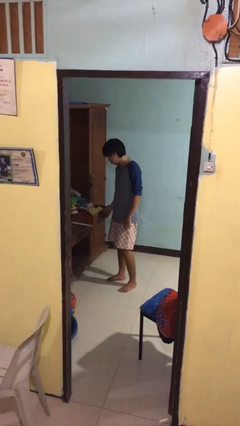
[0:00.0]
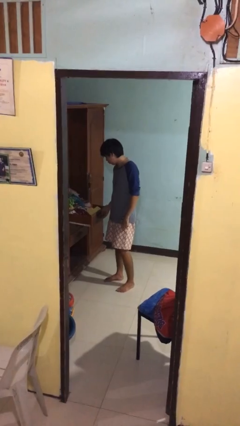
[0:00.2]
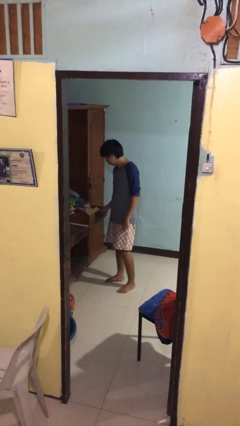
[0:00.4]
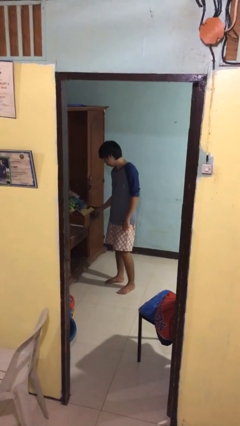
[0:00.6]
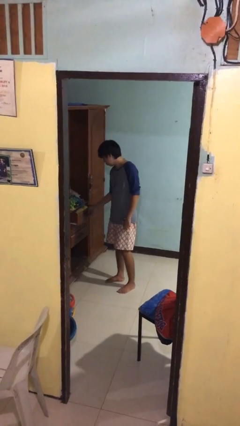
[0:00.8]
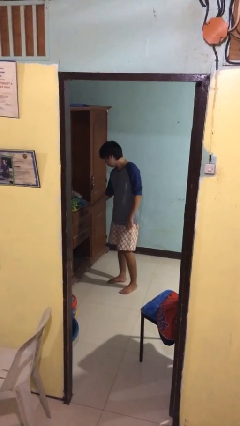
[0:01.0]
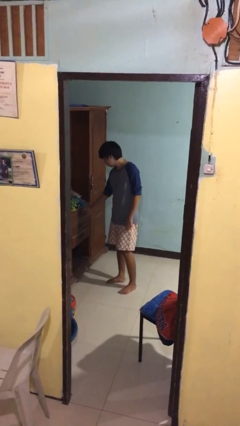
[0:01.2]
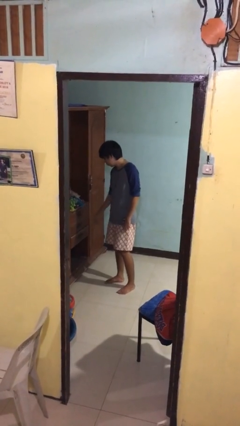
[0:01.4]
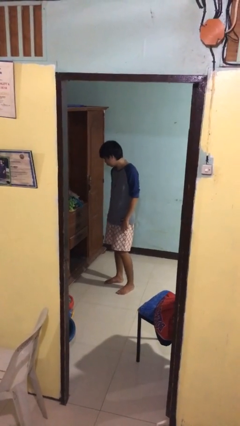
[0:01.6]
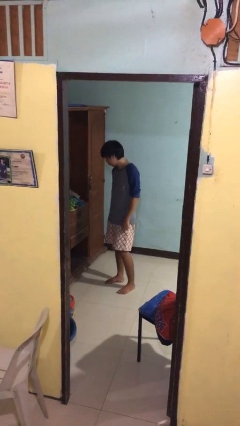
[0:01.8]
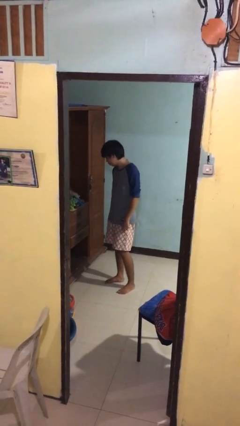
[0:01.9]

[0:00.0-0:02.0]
person closes dresser drawer

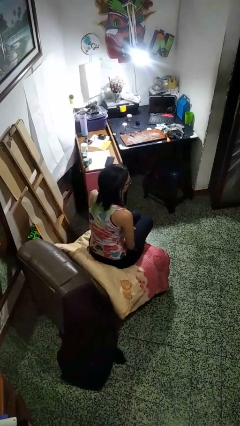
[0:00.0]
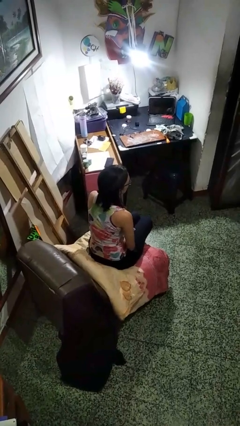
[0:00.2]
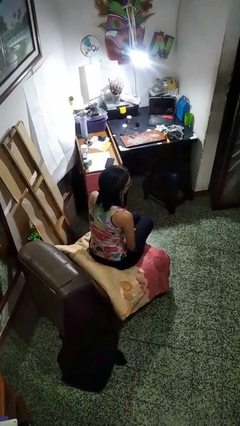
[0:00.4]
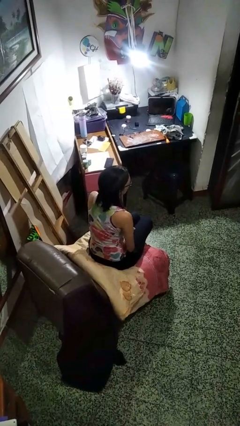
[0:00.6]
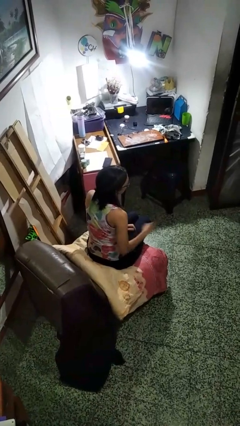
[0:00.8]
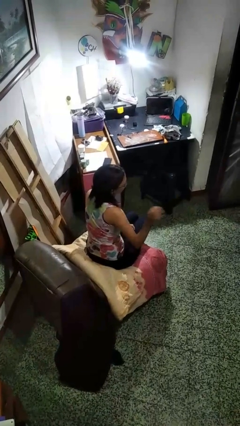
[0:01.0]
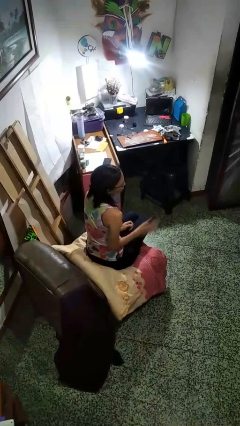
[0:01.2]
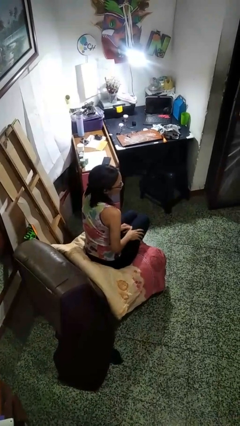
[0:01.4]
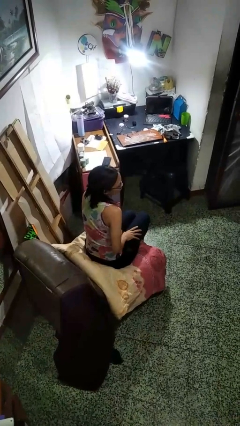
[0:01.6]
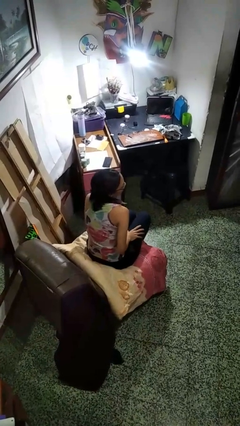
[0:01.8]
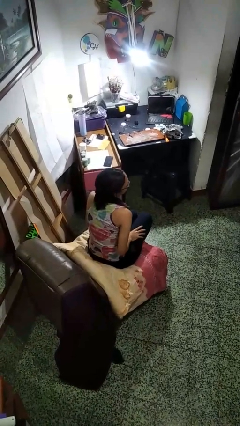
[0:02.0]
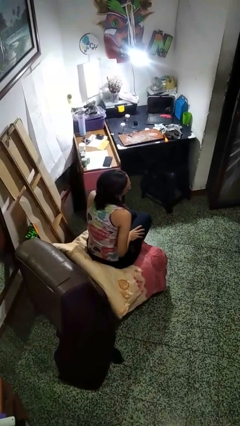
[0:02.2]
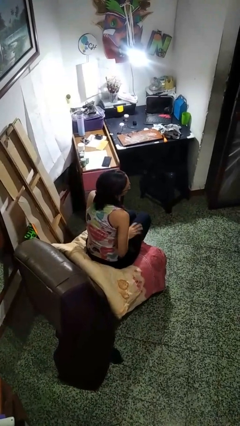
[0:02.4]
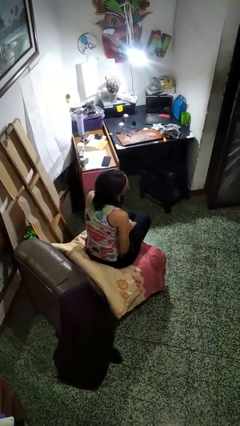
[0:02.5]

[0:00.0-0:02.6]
person slaps hands on thighs

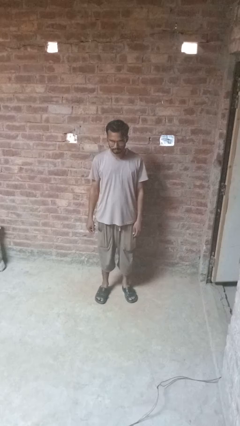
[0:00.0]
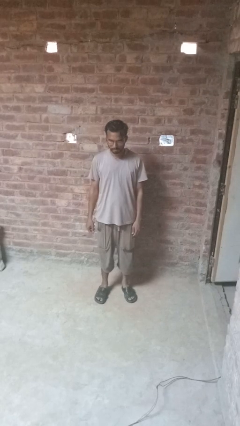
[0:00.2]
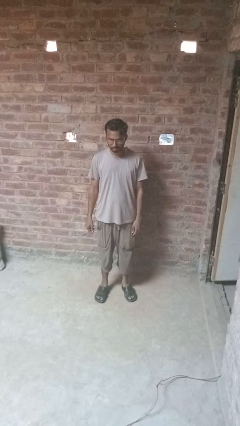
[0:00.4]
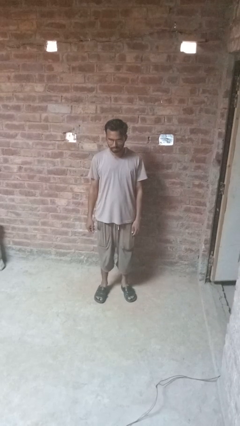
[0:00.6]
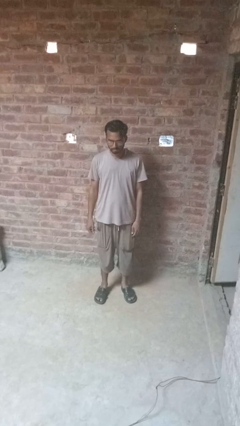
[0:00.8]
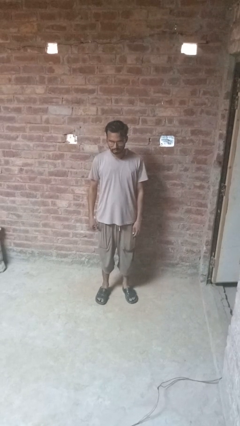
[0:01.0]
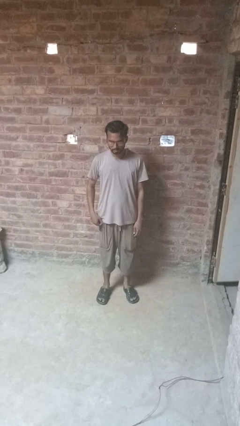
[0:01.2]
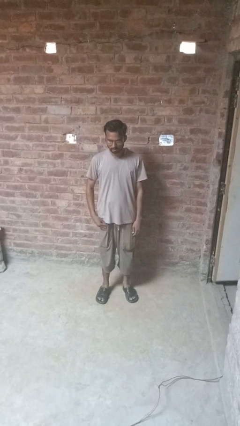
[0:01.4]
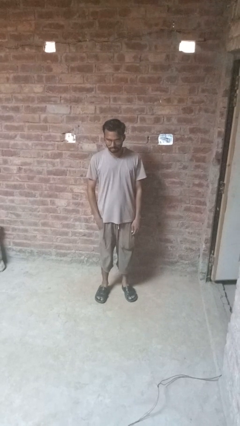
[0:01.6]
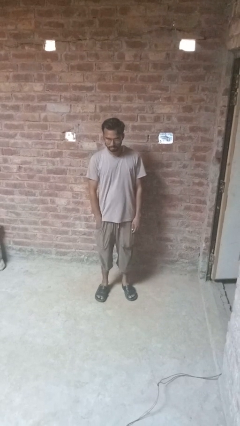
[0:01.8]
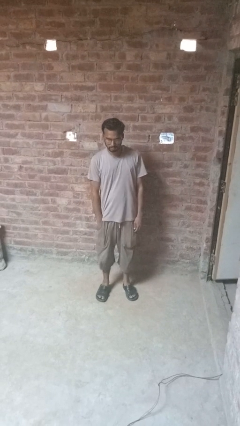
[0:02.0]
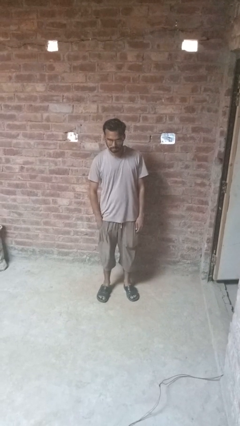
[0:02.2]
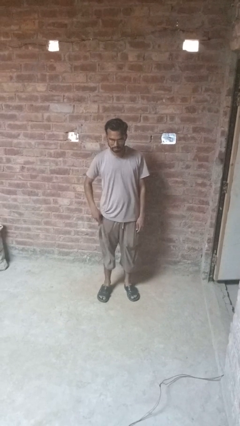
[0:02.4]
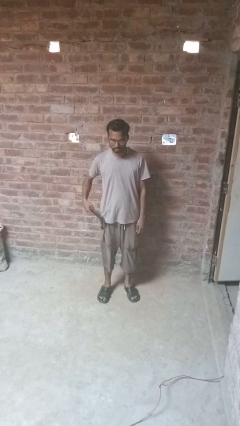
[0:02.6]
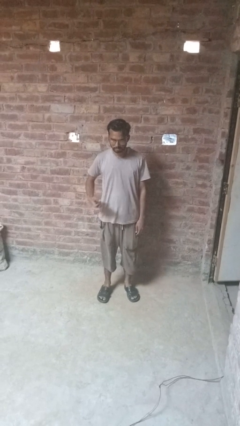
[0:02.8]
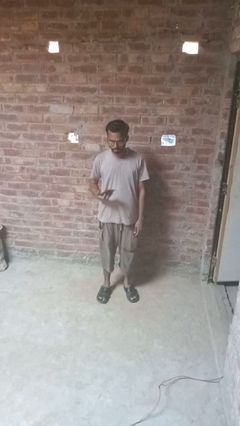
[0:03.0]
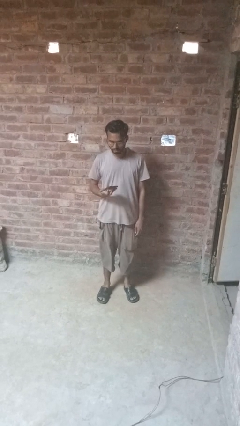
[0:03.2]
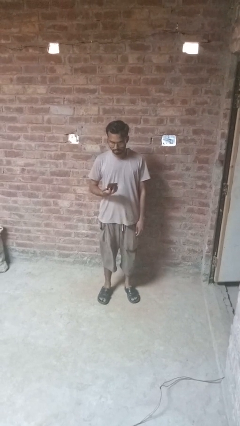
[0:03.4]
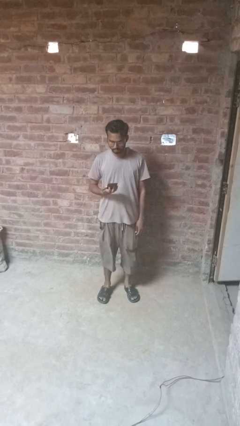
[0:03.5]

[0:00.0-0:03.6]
person takes phone from pocket

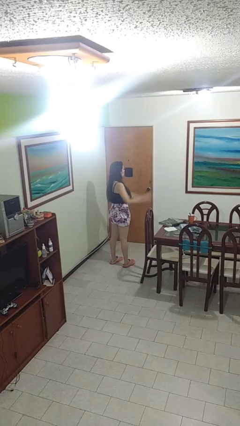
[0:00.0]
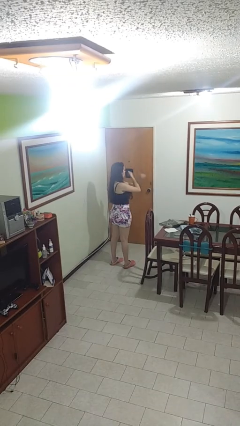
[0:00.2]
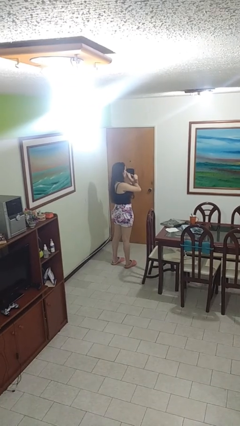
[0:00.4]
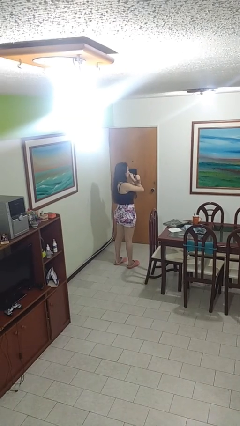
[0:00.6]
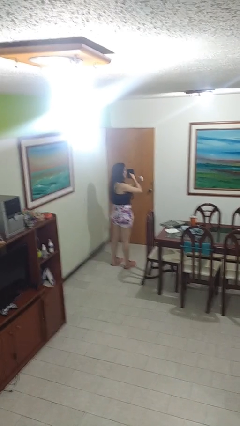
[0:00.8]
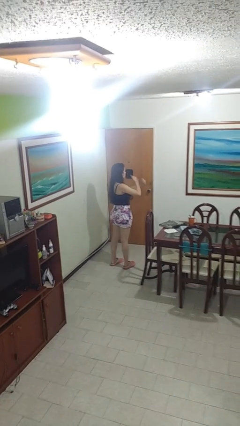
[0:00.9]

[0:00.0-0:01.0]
person gestures arms x

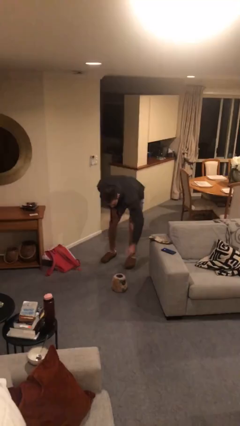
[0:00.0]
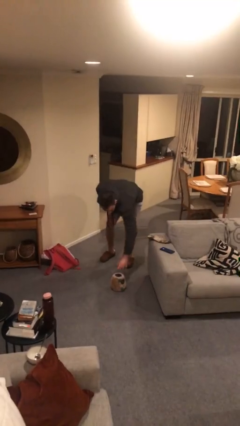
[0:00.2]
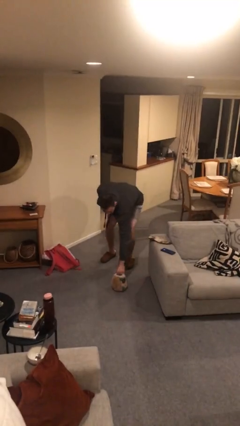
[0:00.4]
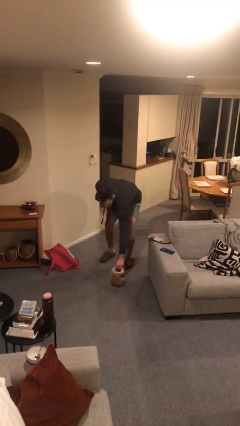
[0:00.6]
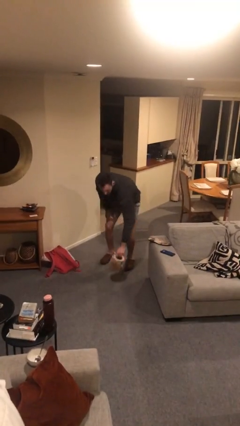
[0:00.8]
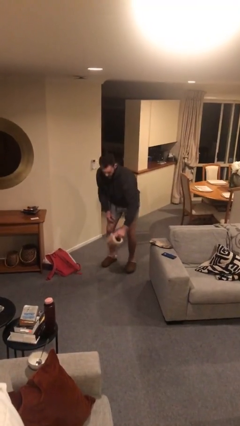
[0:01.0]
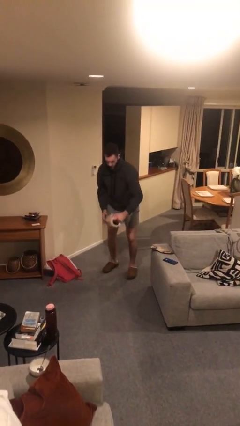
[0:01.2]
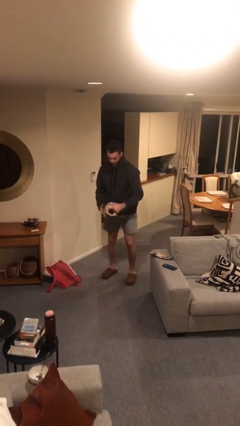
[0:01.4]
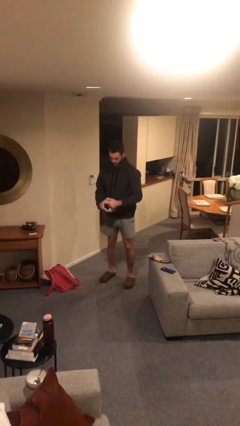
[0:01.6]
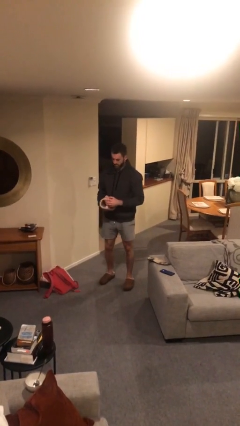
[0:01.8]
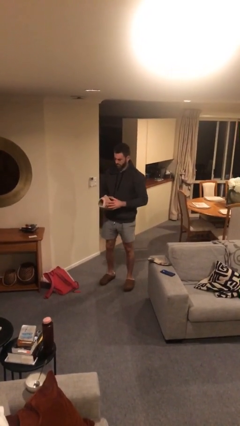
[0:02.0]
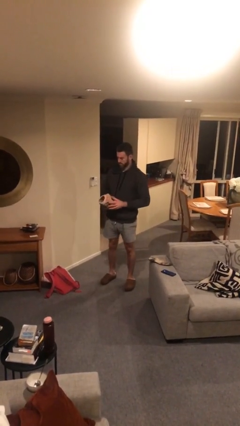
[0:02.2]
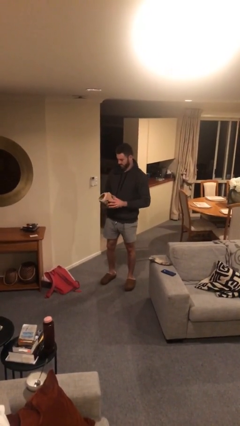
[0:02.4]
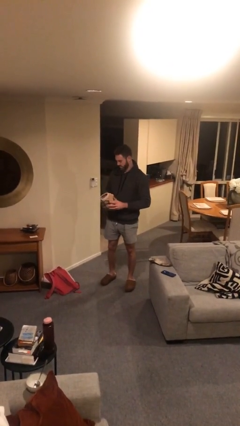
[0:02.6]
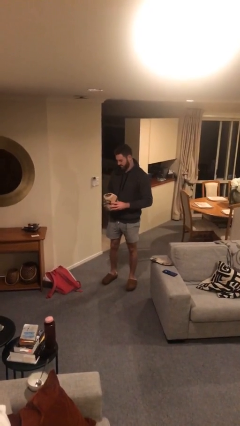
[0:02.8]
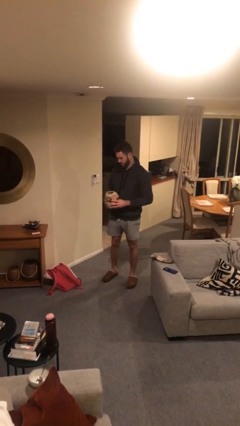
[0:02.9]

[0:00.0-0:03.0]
person picks up object from floor

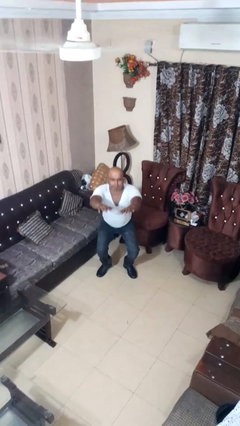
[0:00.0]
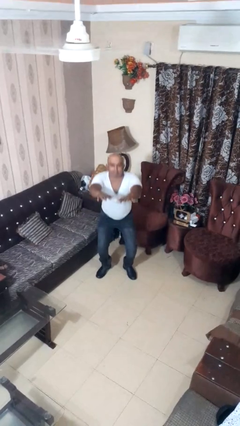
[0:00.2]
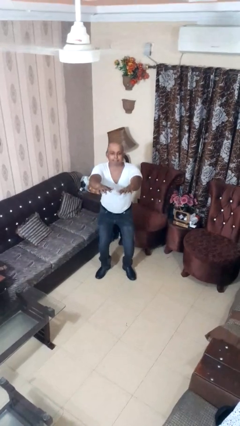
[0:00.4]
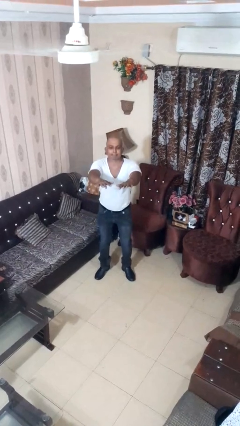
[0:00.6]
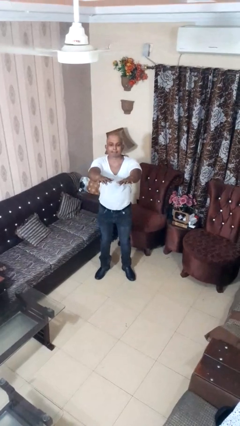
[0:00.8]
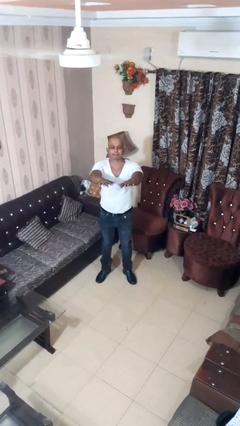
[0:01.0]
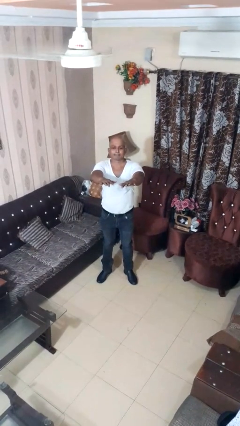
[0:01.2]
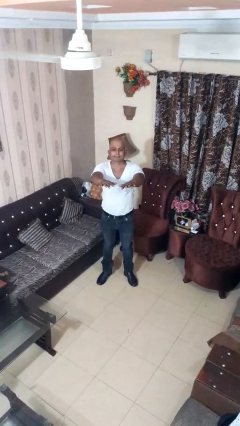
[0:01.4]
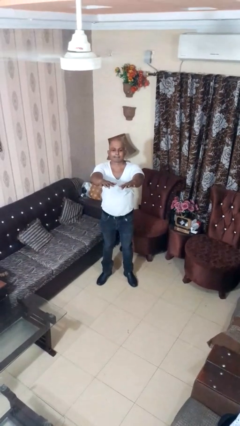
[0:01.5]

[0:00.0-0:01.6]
person stands up

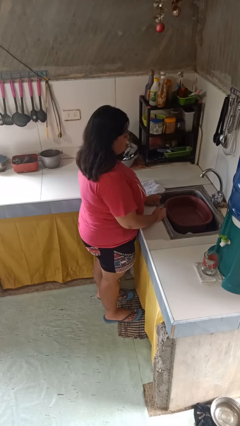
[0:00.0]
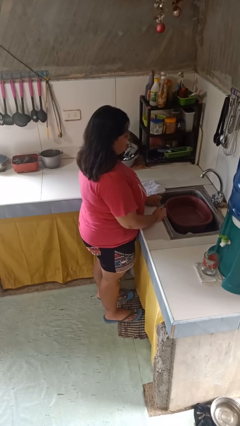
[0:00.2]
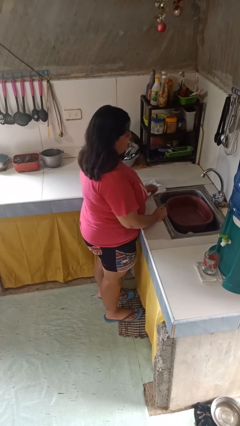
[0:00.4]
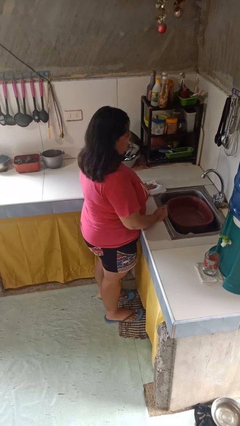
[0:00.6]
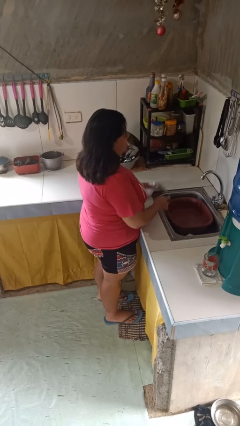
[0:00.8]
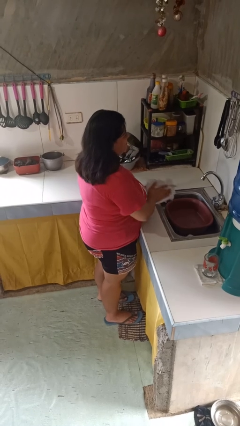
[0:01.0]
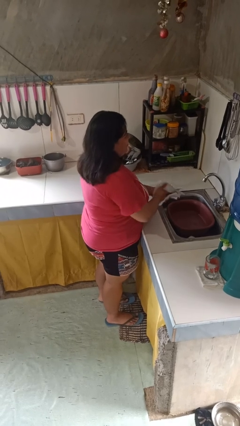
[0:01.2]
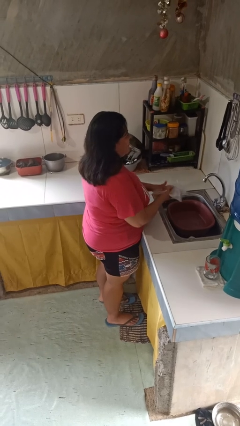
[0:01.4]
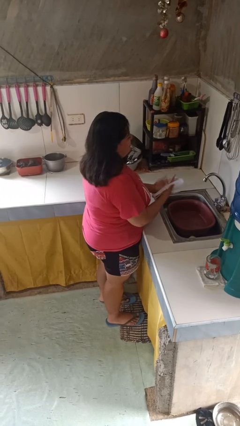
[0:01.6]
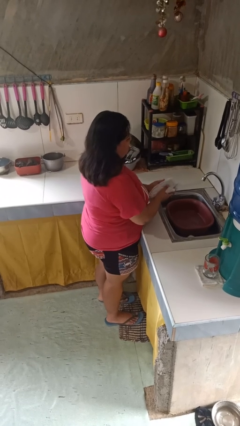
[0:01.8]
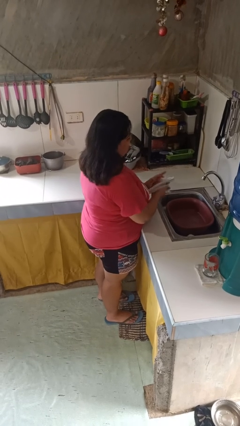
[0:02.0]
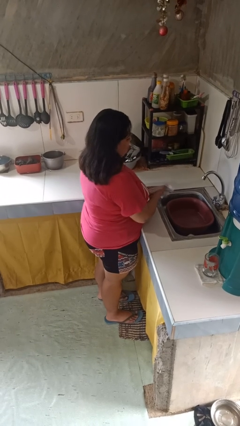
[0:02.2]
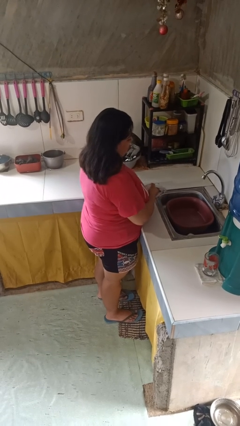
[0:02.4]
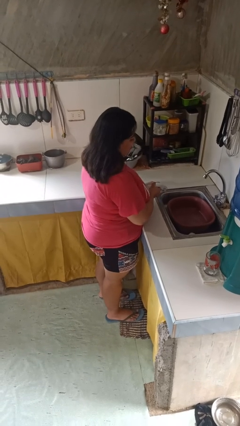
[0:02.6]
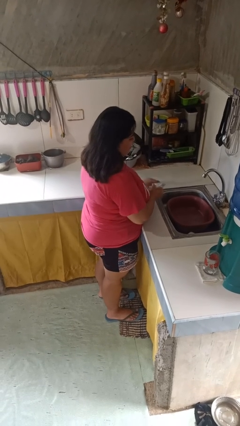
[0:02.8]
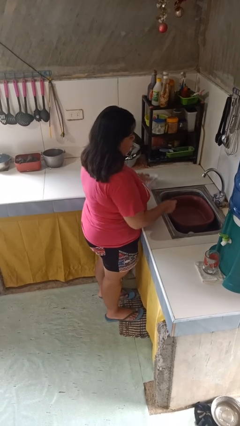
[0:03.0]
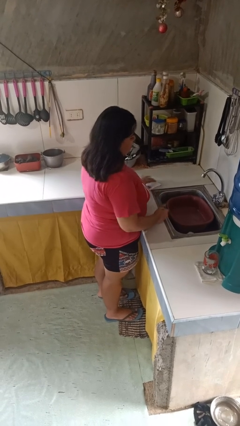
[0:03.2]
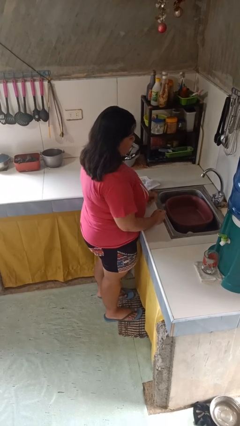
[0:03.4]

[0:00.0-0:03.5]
person dries hands with towel

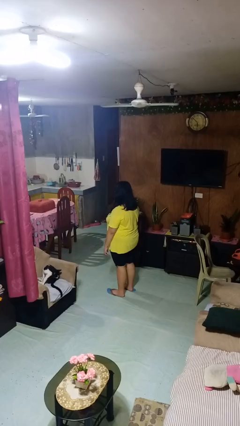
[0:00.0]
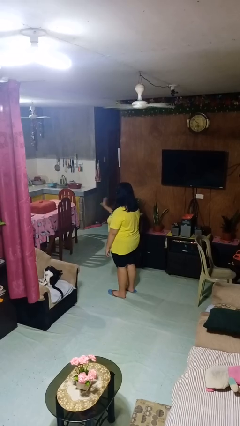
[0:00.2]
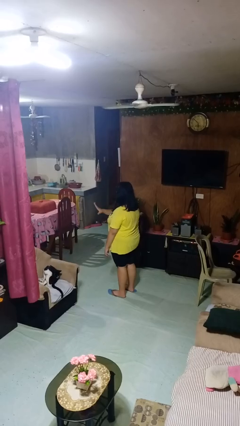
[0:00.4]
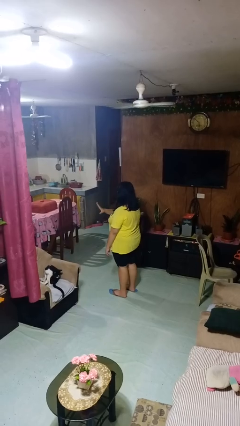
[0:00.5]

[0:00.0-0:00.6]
person gestures swipe left
